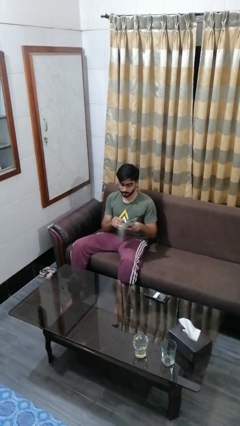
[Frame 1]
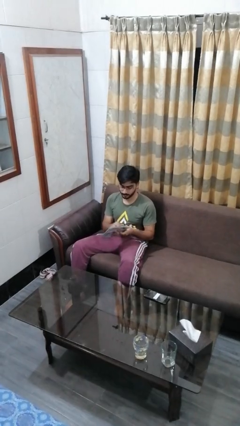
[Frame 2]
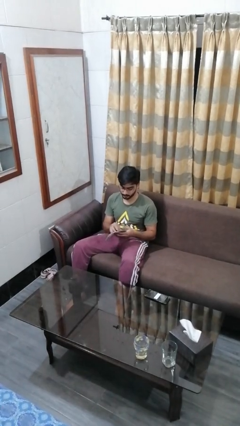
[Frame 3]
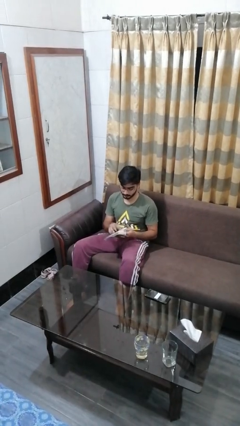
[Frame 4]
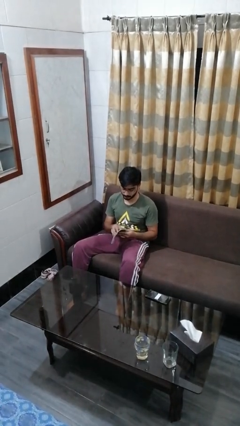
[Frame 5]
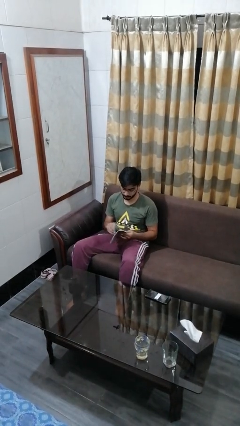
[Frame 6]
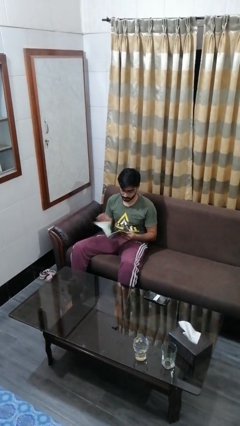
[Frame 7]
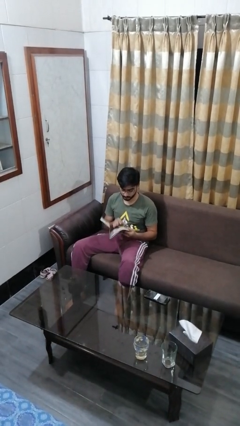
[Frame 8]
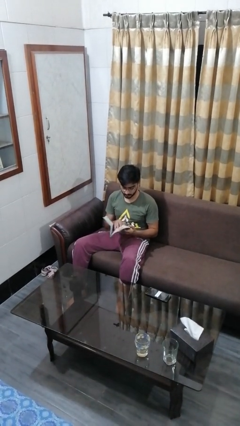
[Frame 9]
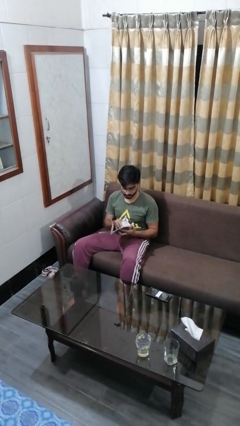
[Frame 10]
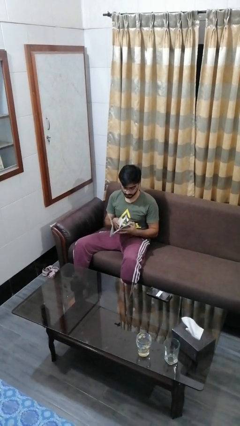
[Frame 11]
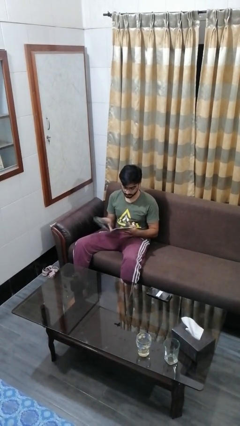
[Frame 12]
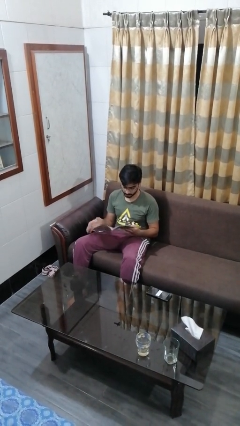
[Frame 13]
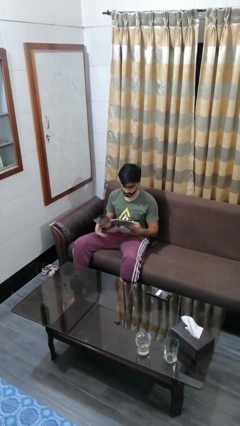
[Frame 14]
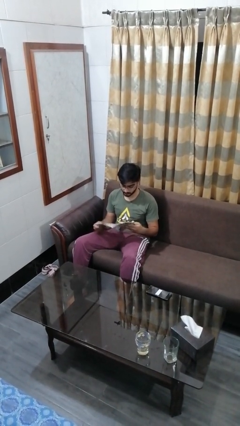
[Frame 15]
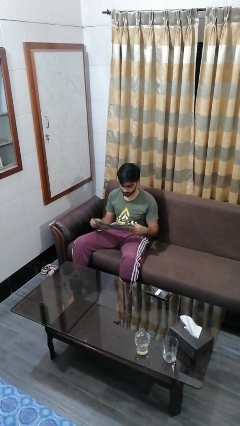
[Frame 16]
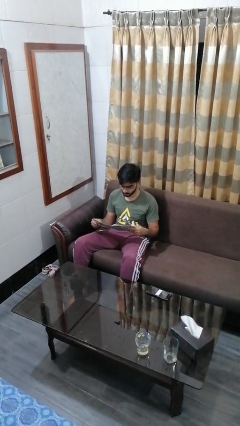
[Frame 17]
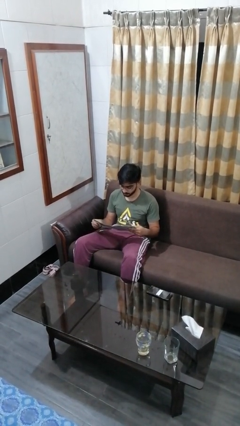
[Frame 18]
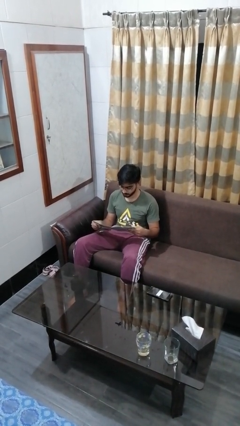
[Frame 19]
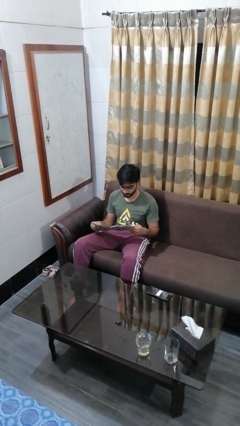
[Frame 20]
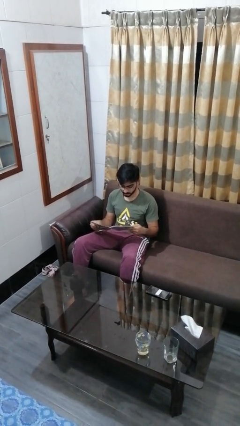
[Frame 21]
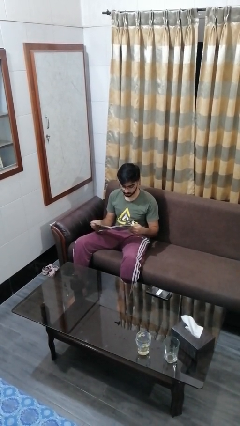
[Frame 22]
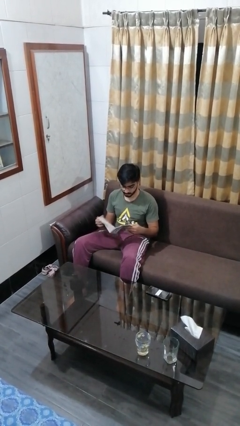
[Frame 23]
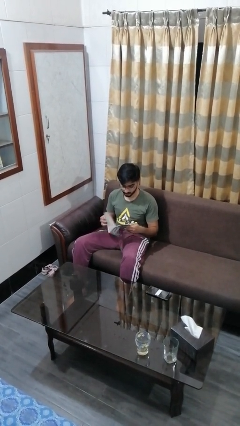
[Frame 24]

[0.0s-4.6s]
person reads magazine

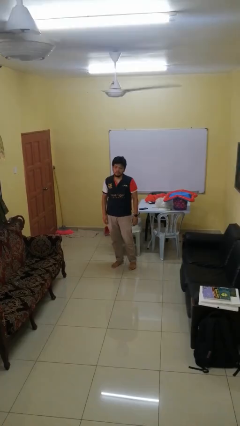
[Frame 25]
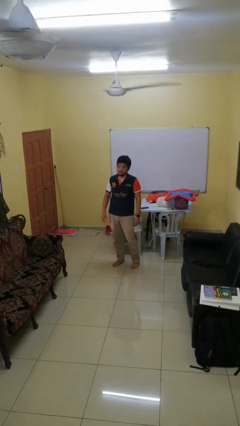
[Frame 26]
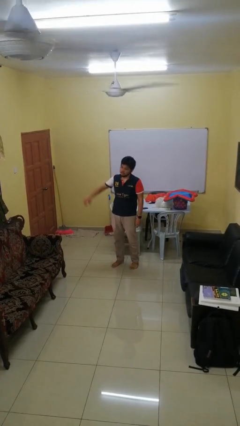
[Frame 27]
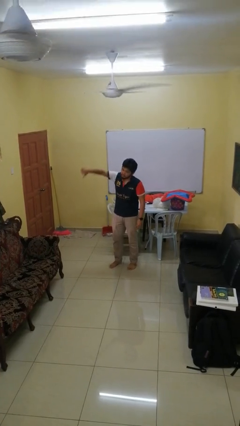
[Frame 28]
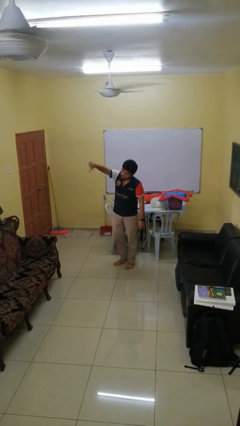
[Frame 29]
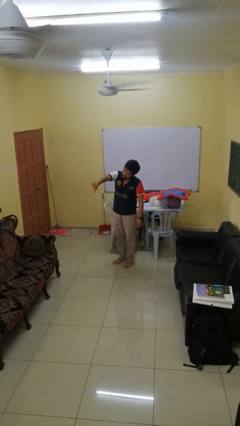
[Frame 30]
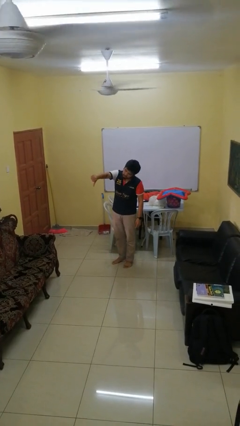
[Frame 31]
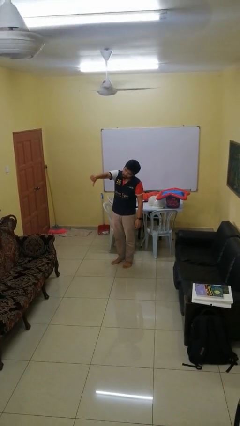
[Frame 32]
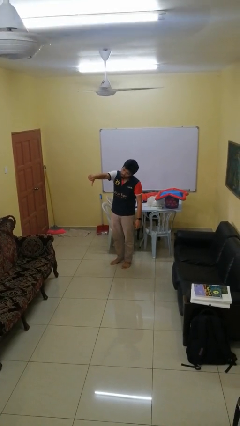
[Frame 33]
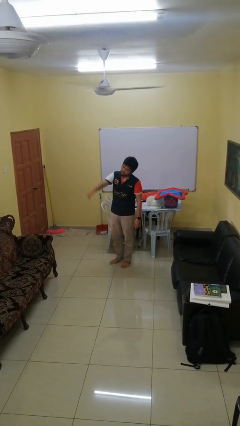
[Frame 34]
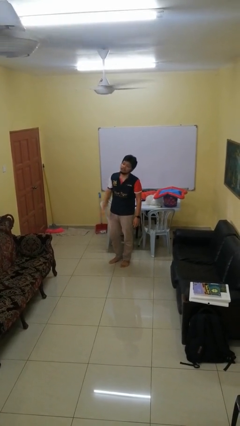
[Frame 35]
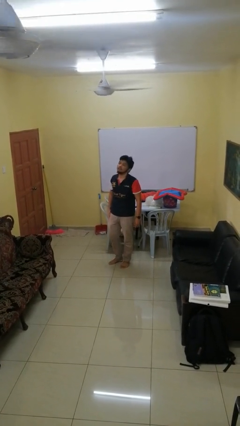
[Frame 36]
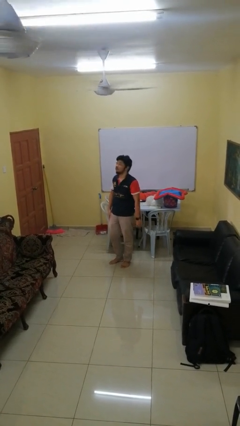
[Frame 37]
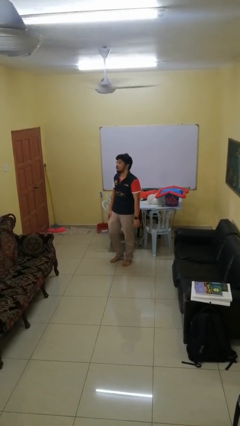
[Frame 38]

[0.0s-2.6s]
person gestures thumbs down

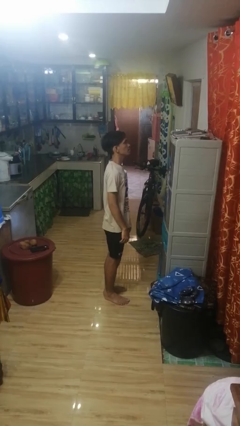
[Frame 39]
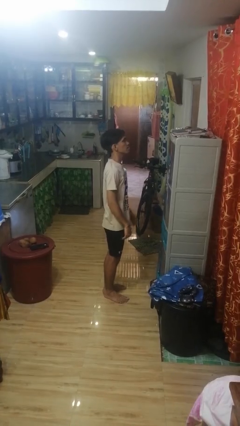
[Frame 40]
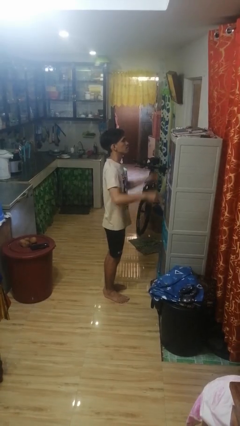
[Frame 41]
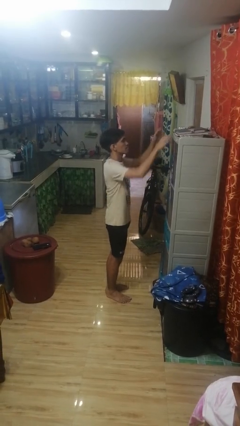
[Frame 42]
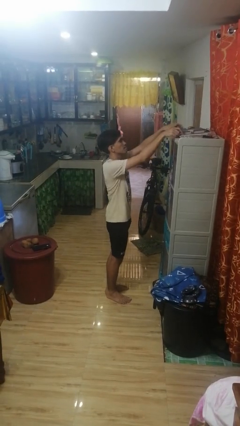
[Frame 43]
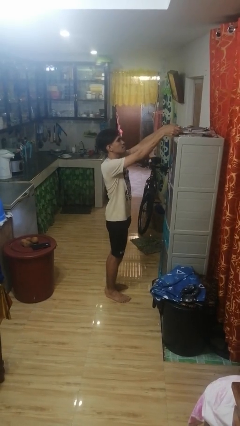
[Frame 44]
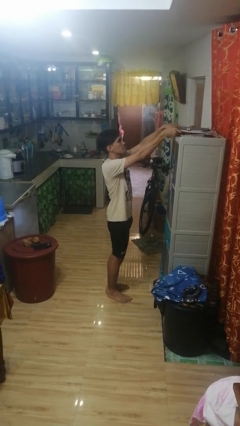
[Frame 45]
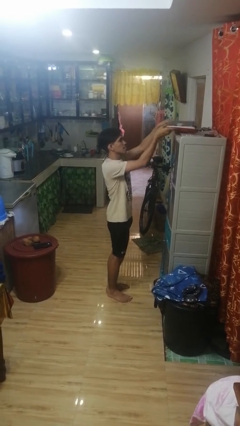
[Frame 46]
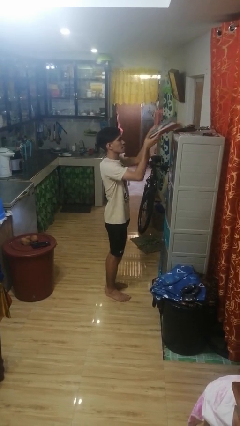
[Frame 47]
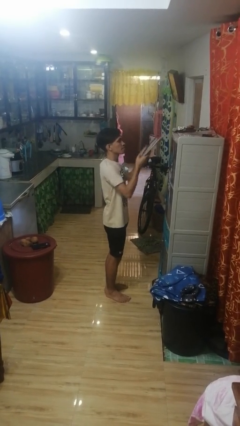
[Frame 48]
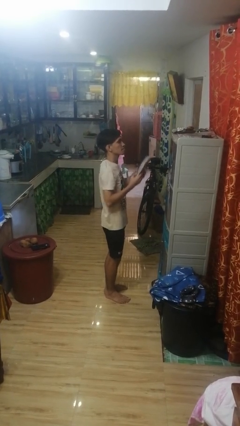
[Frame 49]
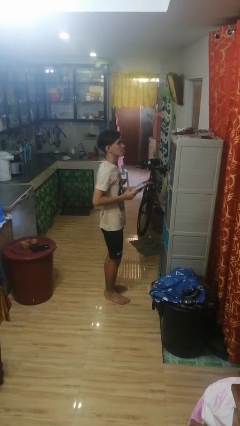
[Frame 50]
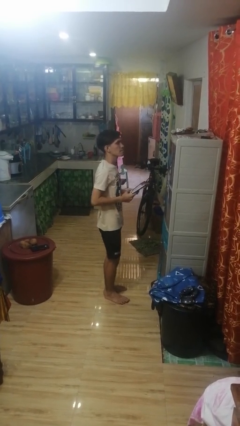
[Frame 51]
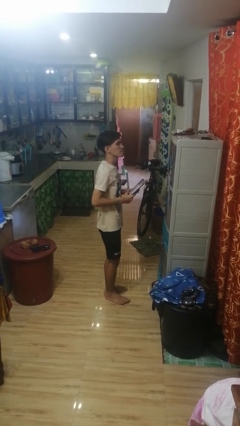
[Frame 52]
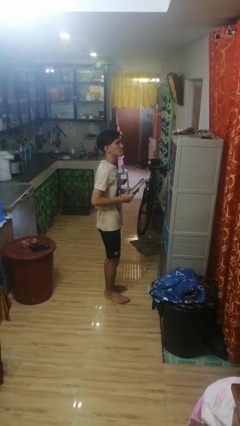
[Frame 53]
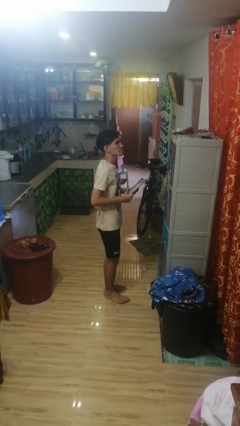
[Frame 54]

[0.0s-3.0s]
person picks up object from shelf

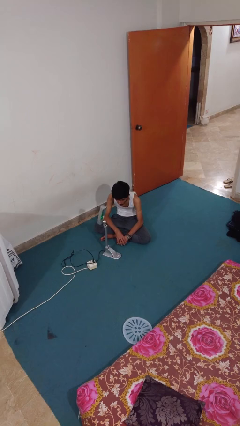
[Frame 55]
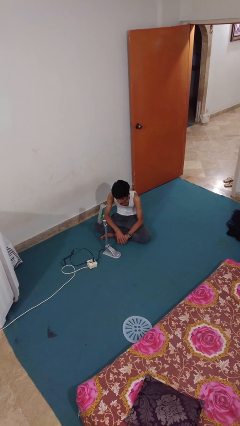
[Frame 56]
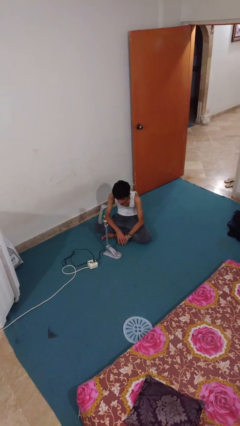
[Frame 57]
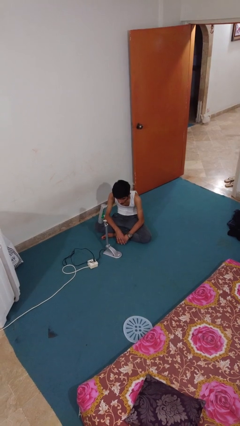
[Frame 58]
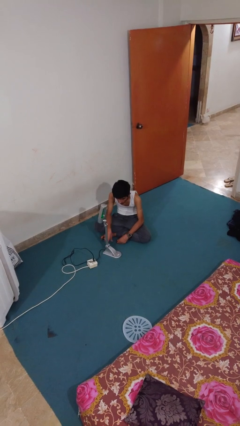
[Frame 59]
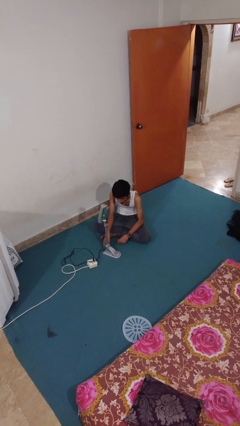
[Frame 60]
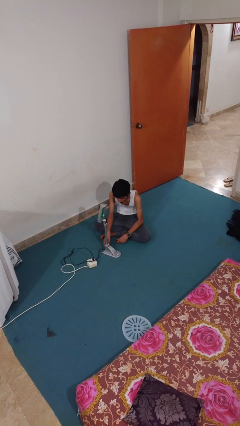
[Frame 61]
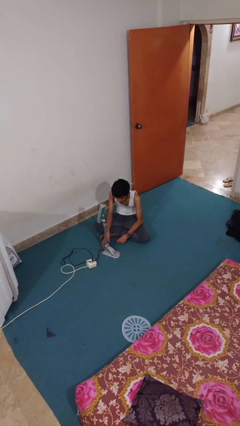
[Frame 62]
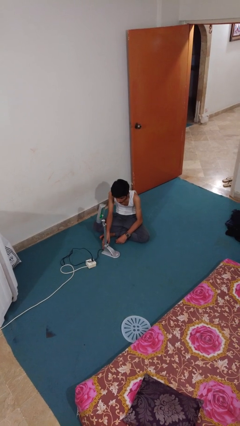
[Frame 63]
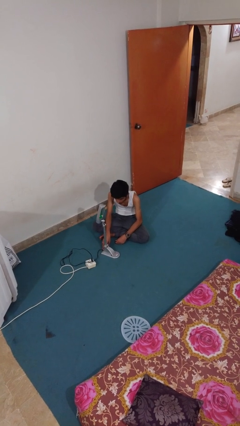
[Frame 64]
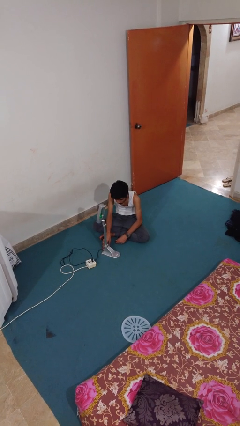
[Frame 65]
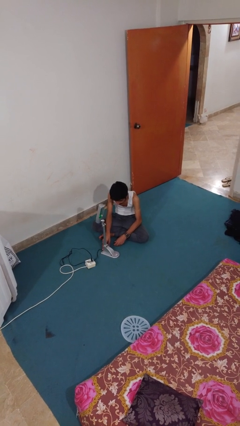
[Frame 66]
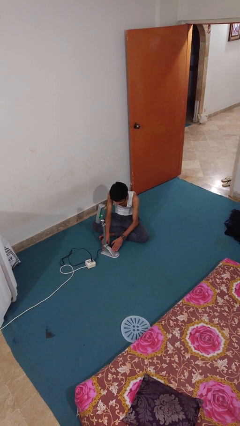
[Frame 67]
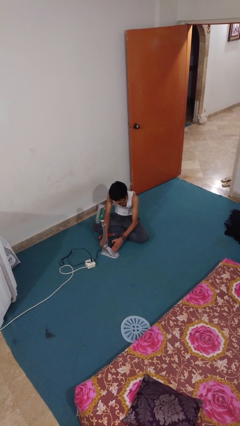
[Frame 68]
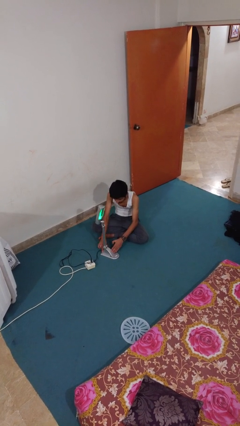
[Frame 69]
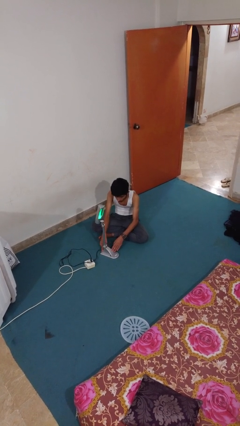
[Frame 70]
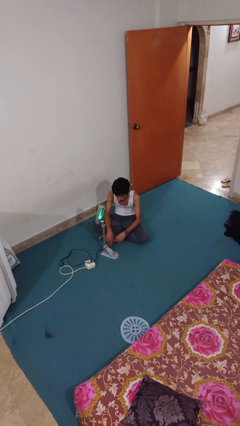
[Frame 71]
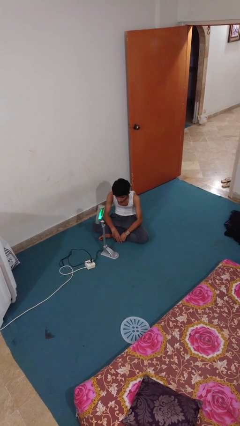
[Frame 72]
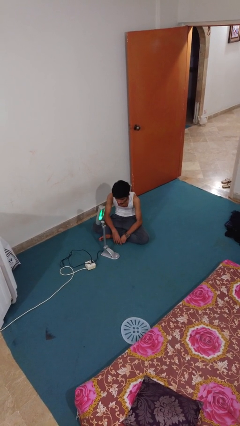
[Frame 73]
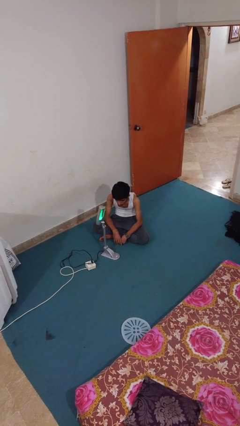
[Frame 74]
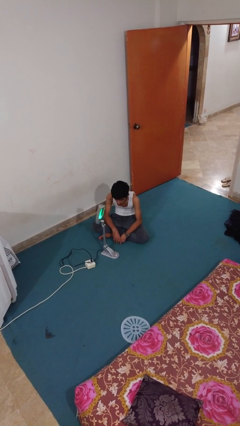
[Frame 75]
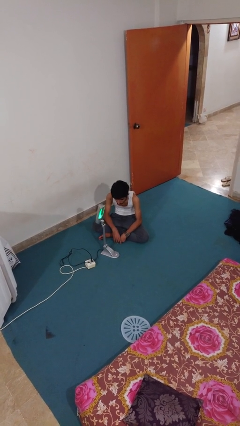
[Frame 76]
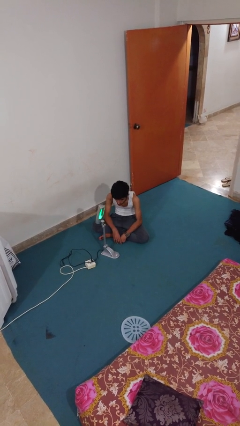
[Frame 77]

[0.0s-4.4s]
person turns on lamp

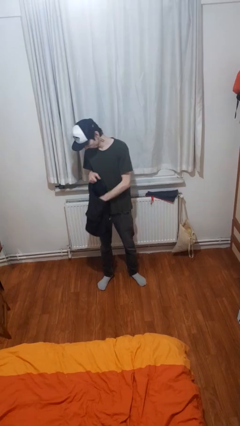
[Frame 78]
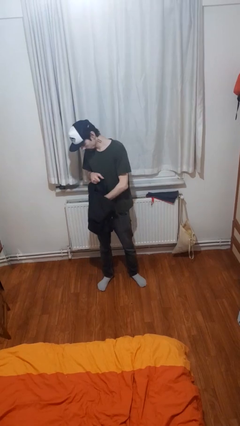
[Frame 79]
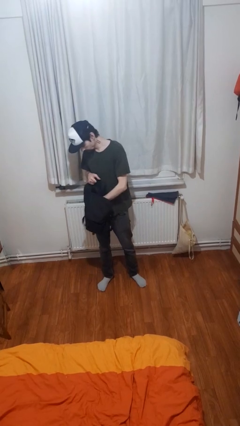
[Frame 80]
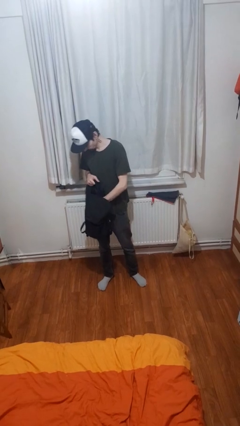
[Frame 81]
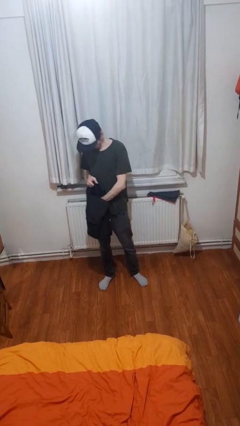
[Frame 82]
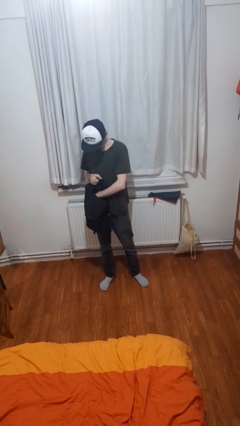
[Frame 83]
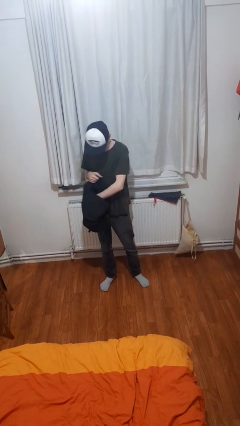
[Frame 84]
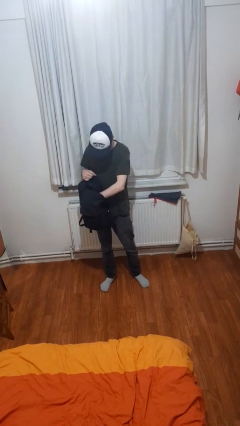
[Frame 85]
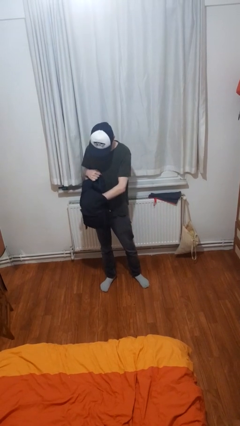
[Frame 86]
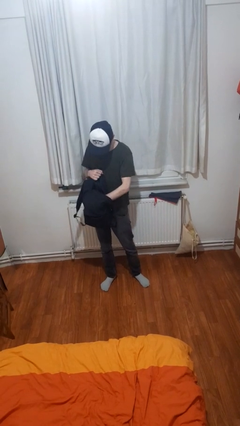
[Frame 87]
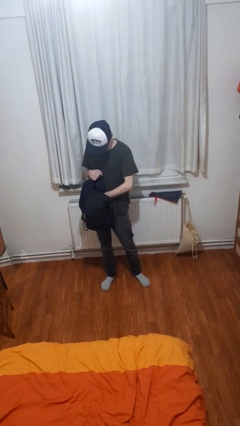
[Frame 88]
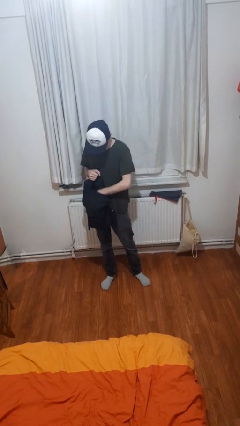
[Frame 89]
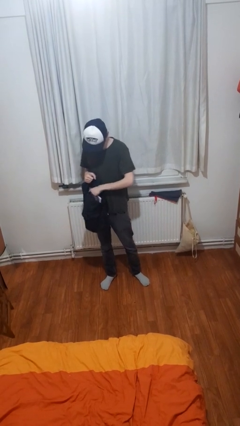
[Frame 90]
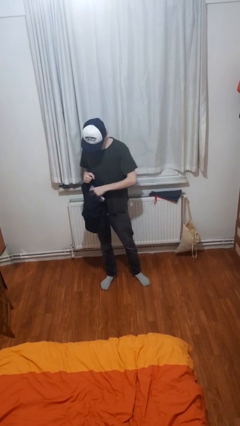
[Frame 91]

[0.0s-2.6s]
person searches in backpack

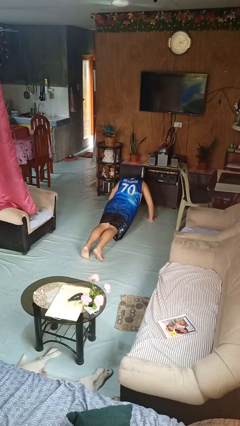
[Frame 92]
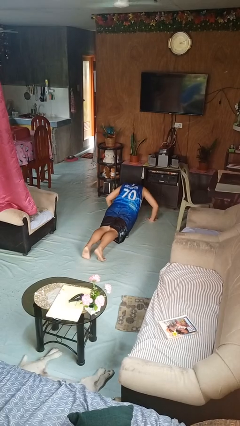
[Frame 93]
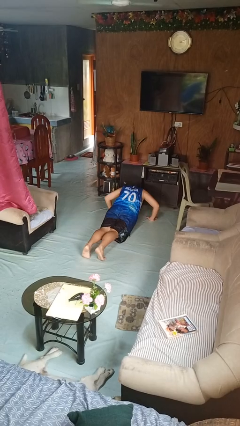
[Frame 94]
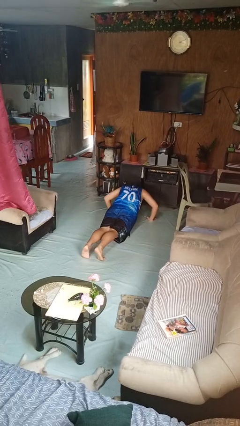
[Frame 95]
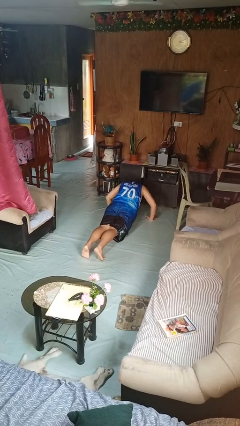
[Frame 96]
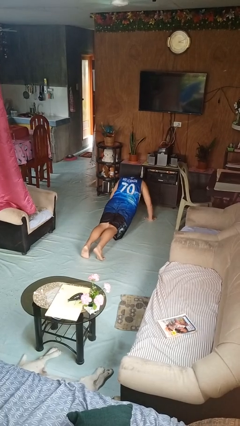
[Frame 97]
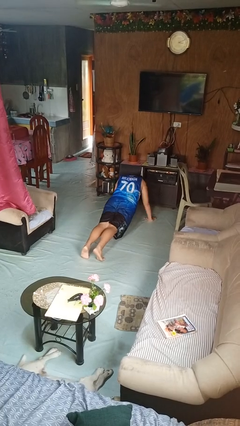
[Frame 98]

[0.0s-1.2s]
person exercises with pushup
